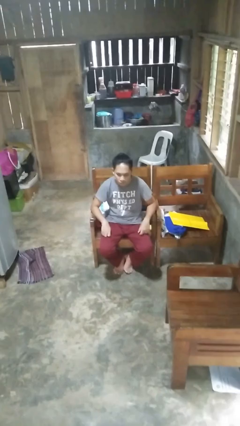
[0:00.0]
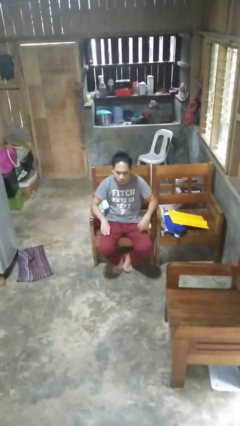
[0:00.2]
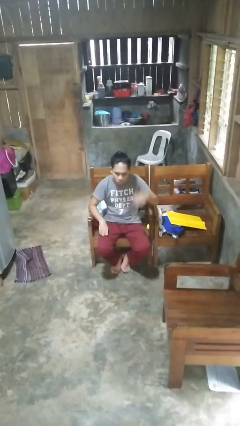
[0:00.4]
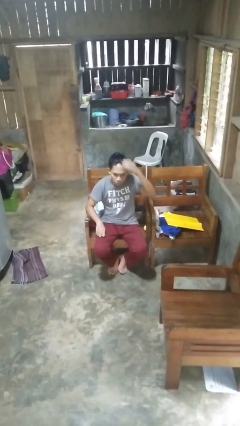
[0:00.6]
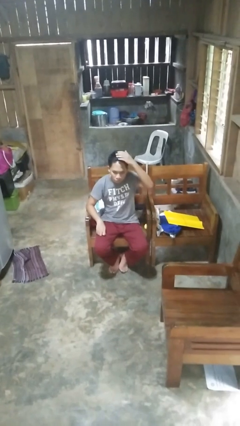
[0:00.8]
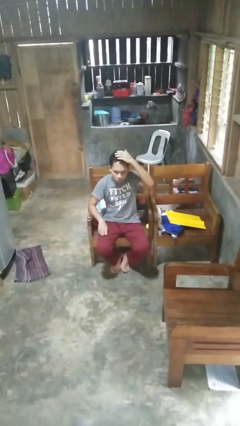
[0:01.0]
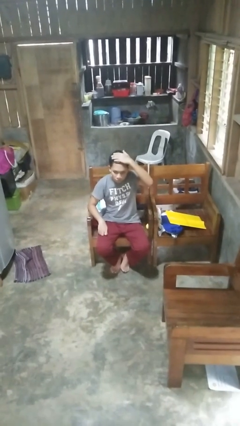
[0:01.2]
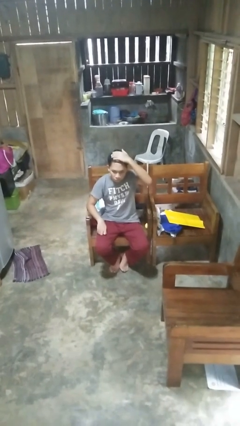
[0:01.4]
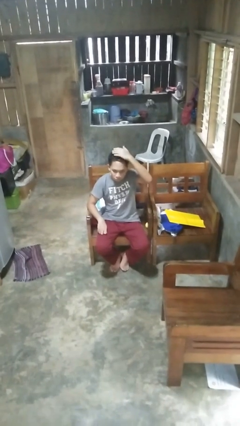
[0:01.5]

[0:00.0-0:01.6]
person pats head

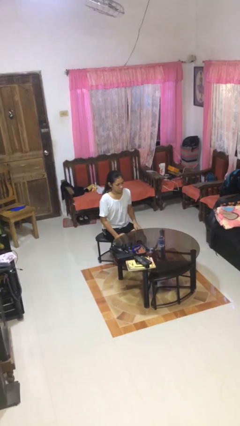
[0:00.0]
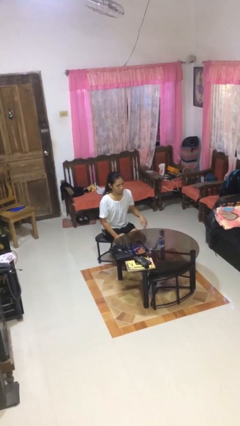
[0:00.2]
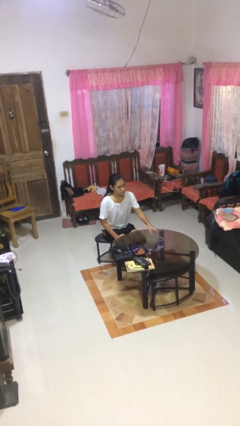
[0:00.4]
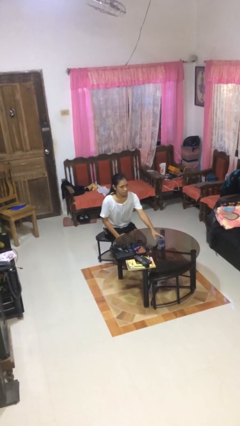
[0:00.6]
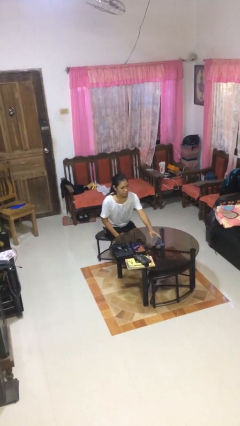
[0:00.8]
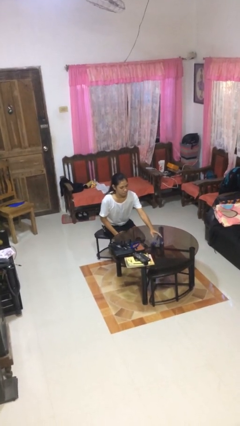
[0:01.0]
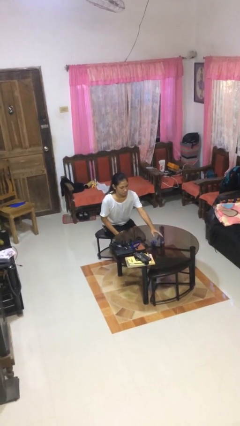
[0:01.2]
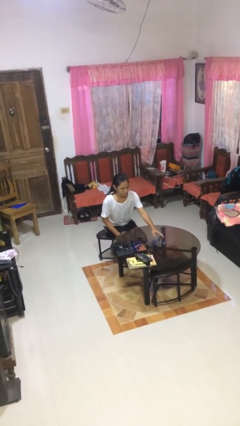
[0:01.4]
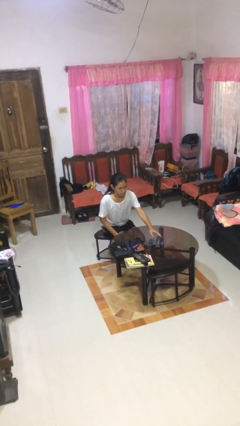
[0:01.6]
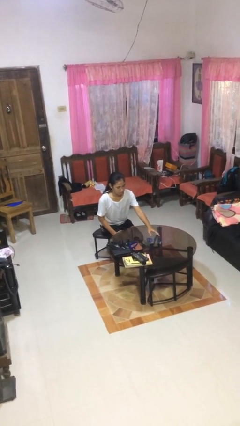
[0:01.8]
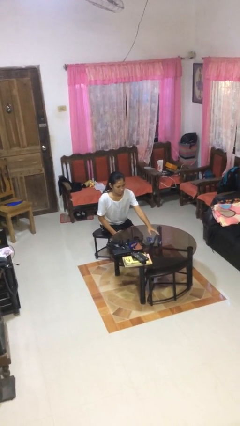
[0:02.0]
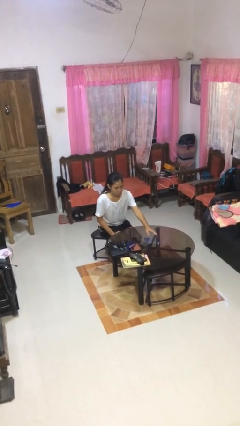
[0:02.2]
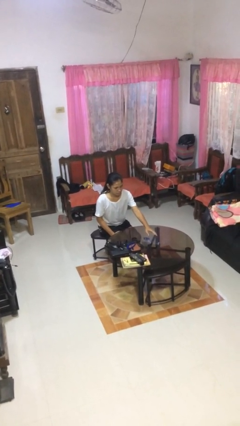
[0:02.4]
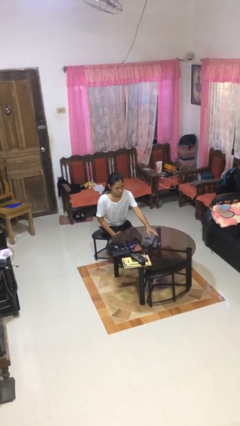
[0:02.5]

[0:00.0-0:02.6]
person knocks over glass

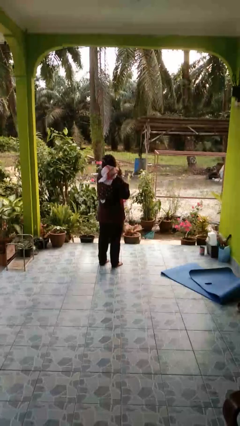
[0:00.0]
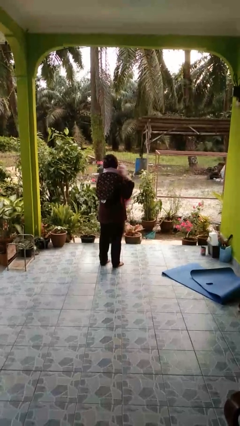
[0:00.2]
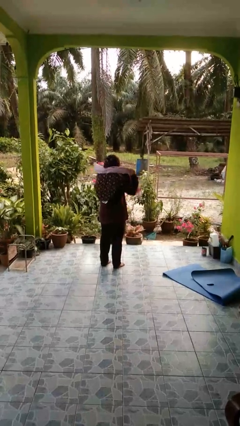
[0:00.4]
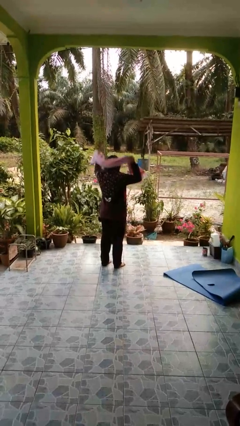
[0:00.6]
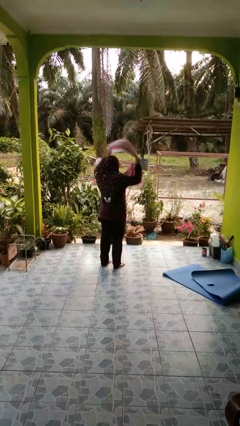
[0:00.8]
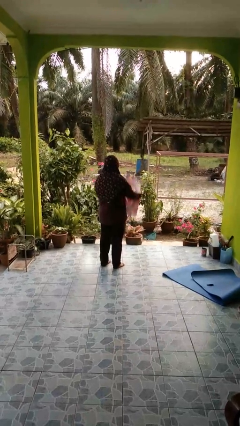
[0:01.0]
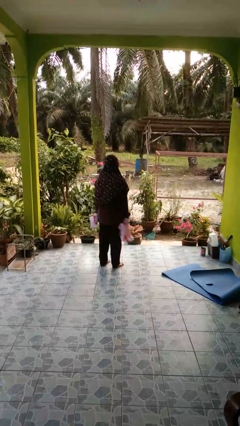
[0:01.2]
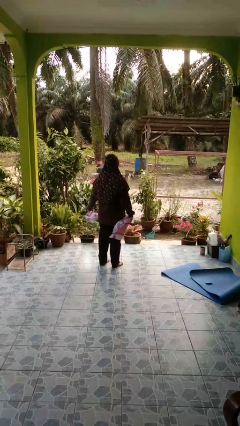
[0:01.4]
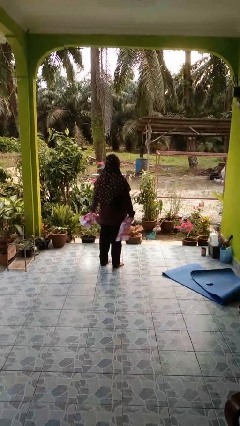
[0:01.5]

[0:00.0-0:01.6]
person takes off scarf

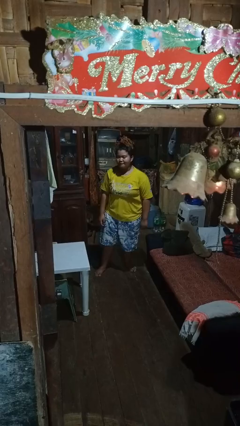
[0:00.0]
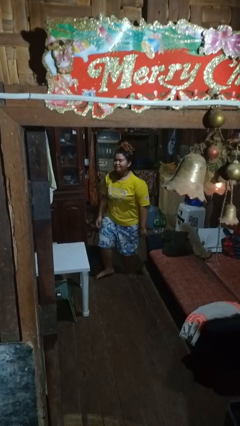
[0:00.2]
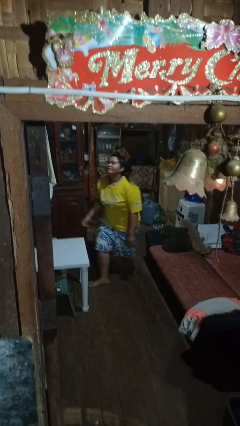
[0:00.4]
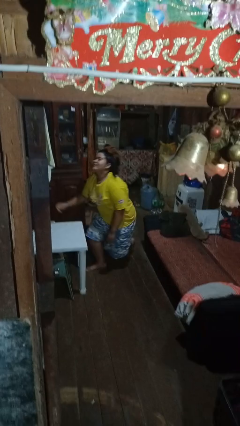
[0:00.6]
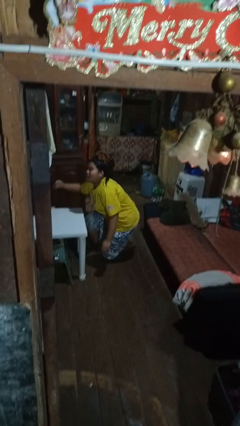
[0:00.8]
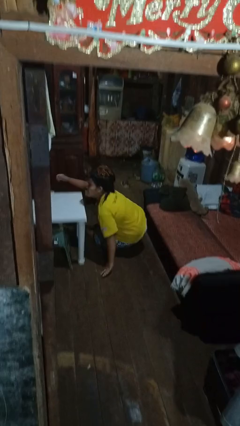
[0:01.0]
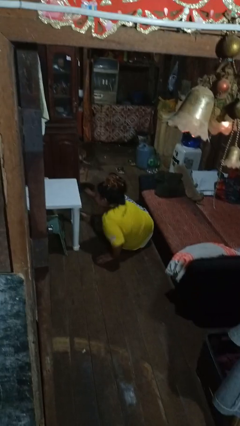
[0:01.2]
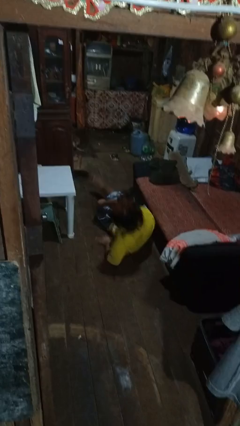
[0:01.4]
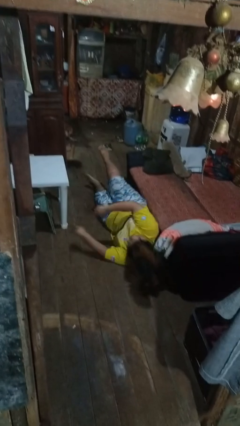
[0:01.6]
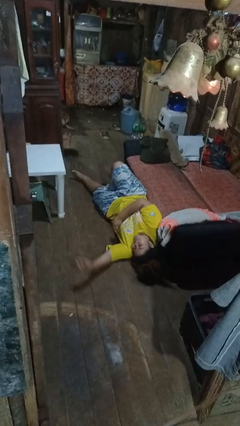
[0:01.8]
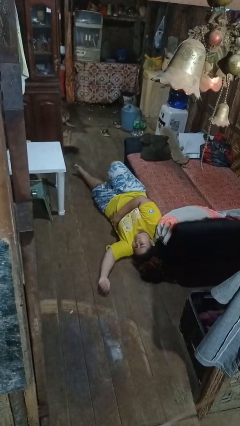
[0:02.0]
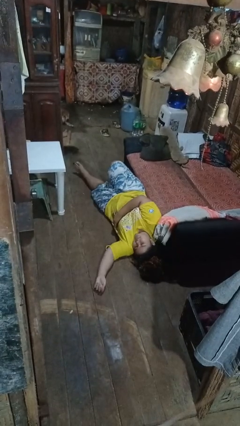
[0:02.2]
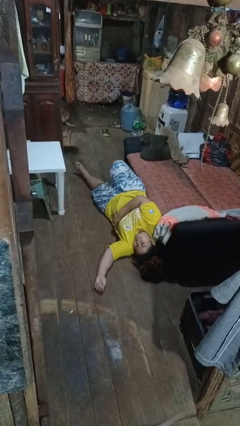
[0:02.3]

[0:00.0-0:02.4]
person falls while standing

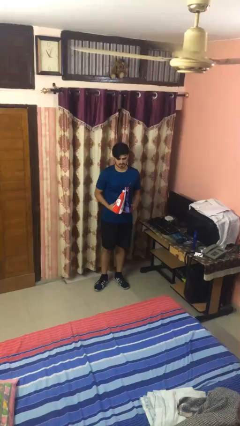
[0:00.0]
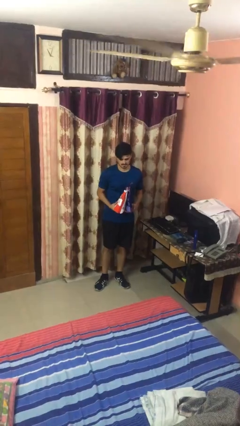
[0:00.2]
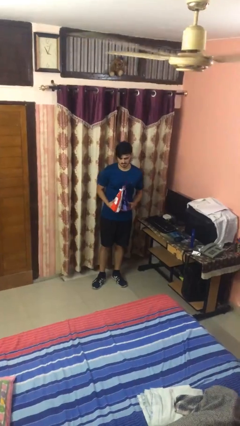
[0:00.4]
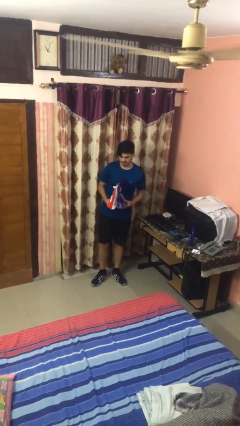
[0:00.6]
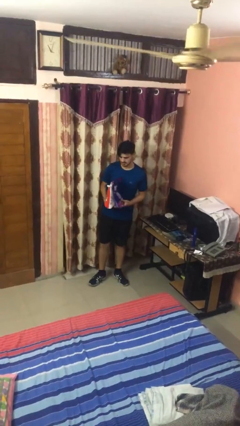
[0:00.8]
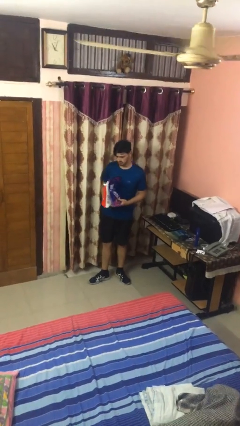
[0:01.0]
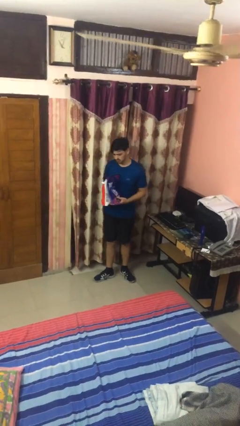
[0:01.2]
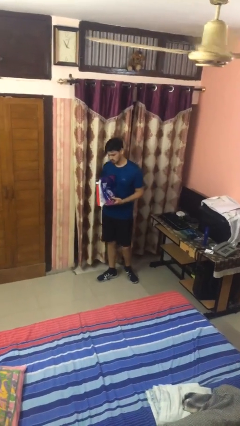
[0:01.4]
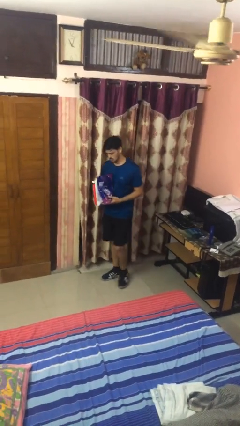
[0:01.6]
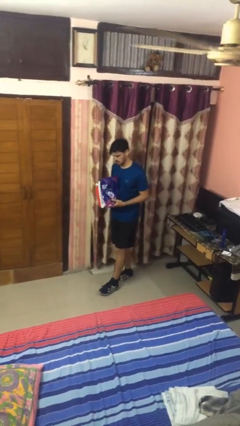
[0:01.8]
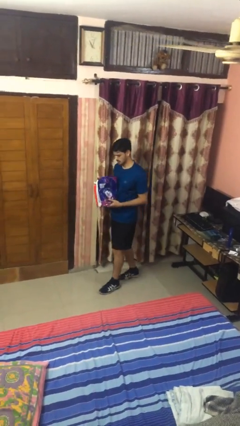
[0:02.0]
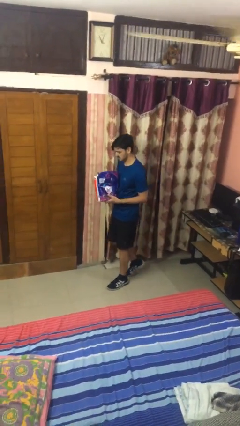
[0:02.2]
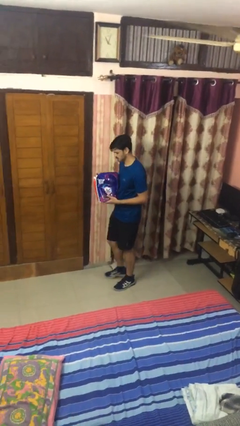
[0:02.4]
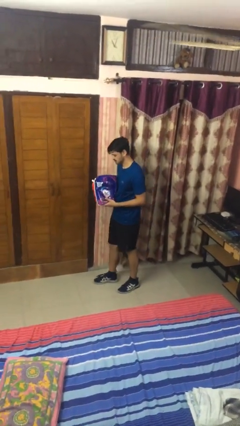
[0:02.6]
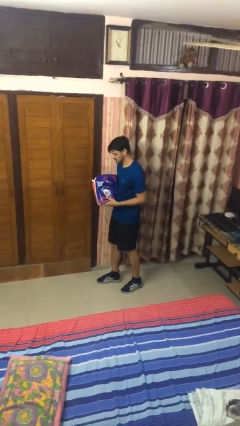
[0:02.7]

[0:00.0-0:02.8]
person carries groceries

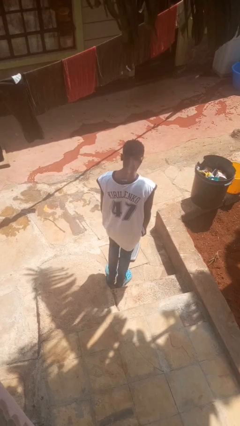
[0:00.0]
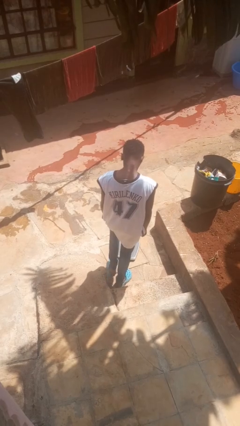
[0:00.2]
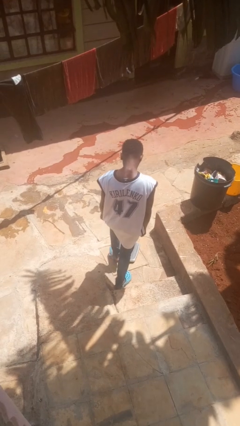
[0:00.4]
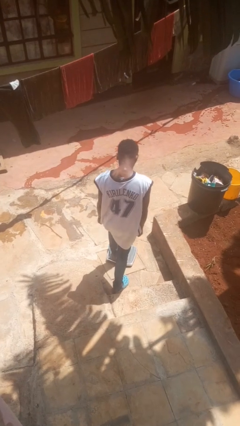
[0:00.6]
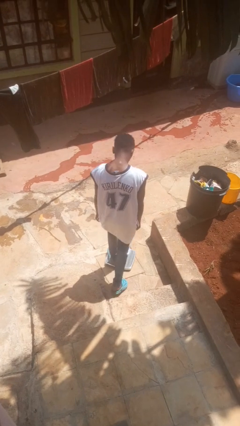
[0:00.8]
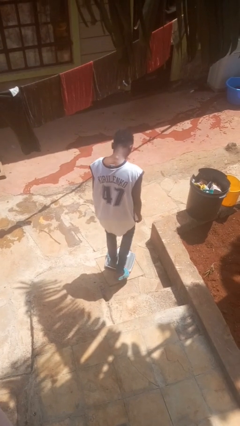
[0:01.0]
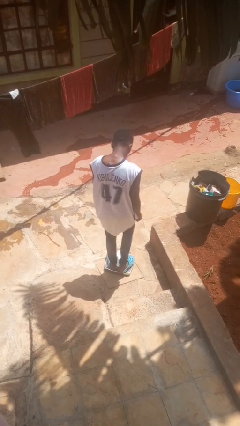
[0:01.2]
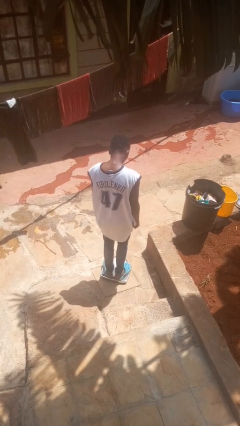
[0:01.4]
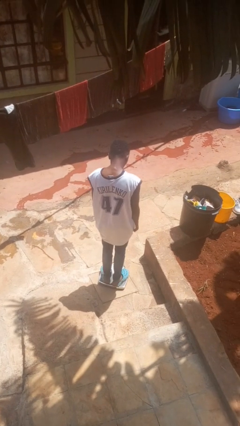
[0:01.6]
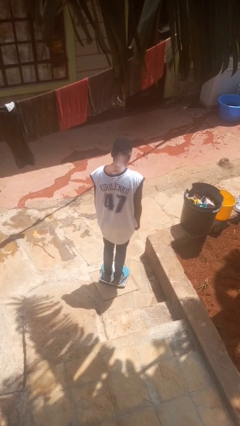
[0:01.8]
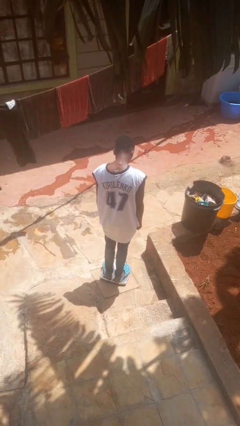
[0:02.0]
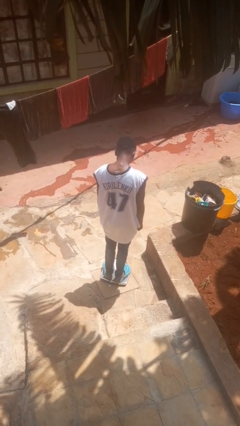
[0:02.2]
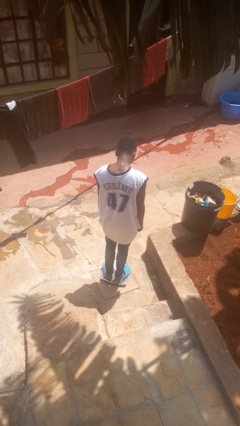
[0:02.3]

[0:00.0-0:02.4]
person uses bodyweight scale

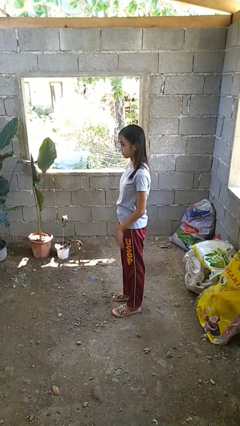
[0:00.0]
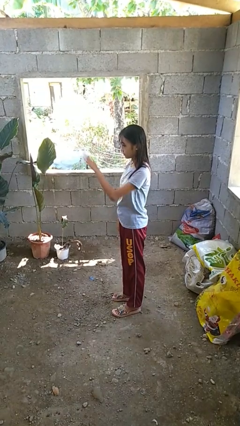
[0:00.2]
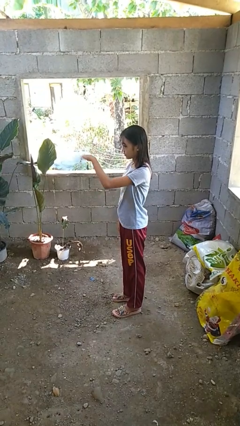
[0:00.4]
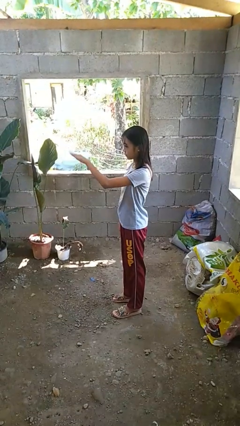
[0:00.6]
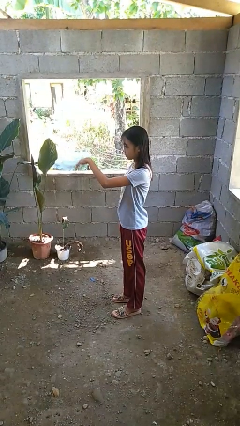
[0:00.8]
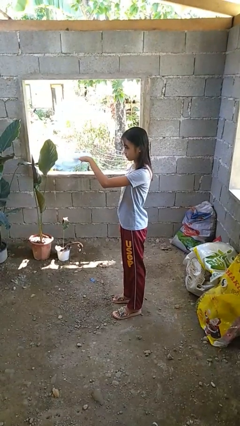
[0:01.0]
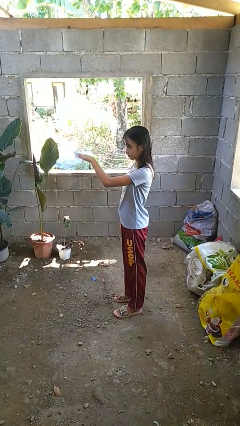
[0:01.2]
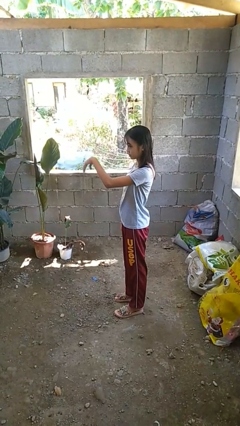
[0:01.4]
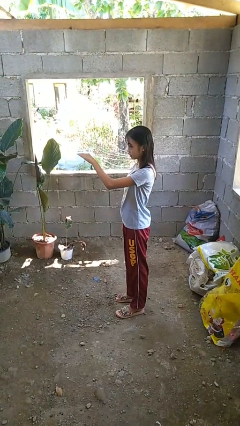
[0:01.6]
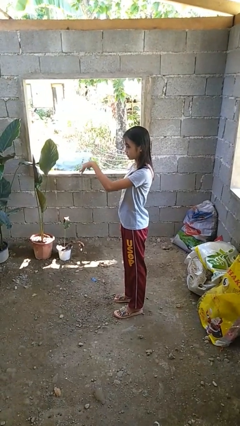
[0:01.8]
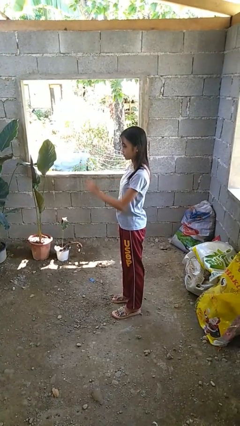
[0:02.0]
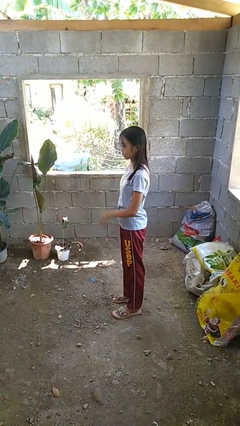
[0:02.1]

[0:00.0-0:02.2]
person gestures come here

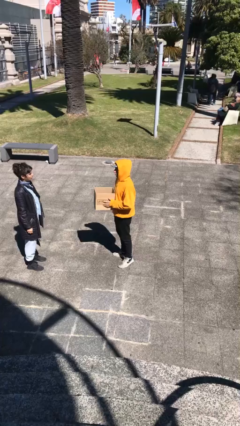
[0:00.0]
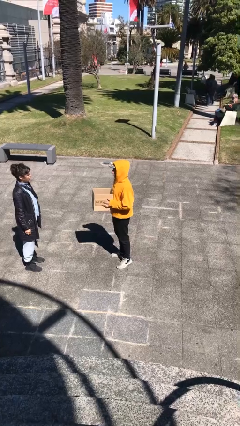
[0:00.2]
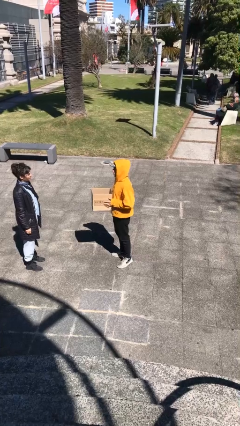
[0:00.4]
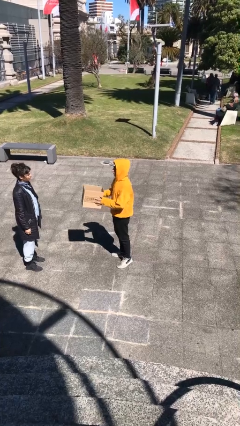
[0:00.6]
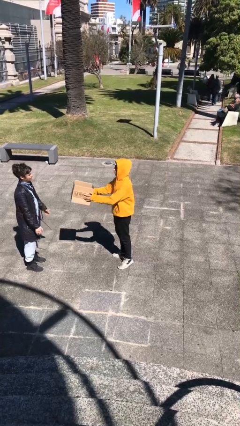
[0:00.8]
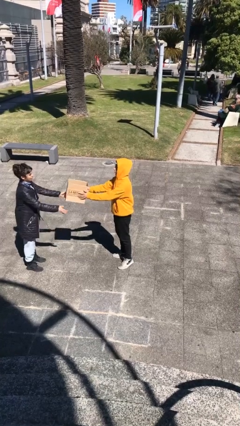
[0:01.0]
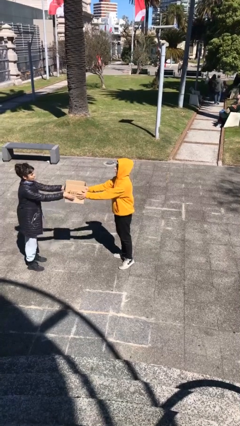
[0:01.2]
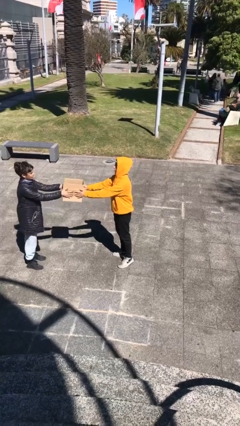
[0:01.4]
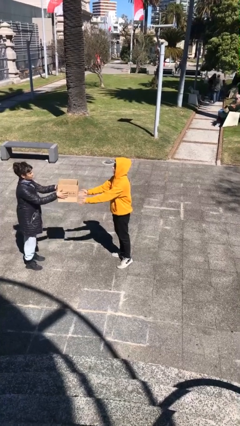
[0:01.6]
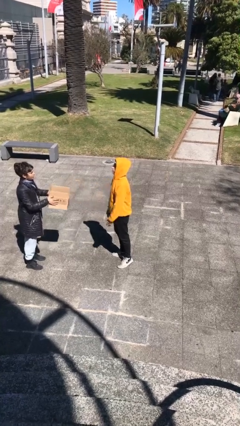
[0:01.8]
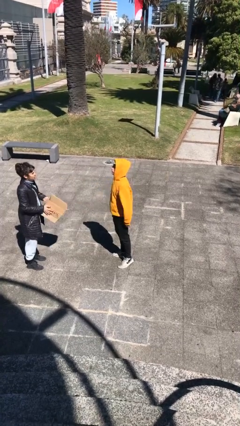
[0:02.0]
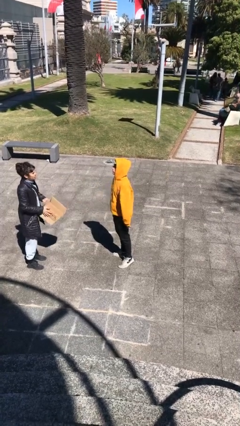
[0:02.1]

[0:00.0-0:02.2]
person transfers object to person
